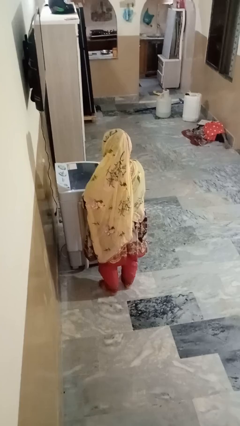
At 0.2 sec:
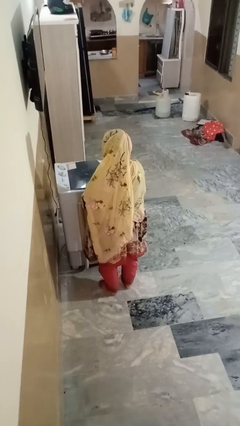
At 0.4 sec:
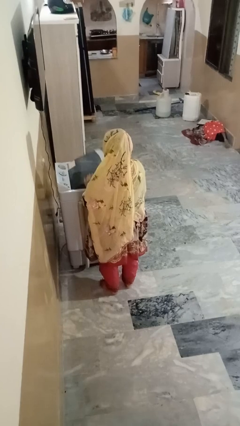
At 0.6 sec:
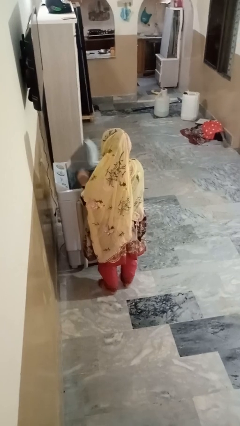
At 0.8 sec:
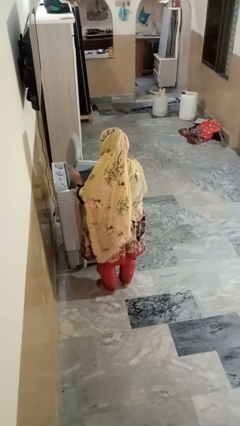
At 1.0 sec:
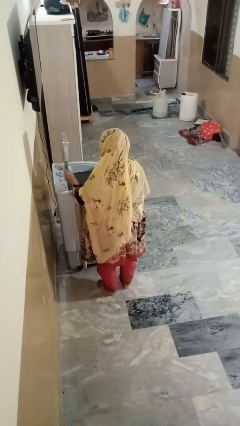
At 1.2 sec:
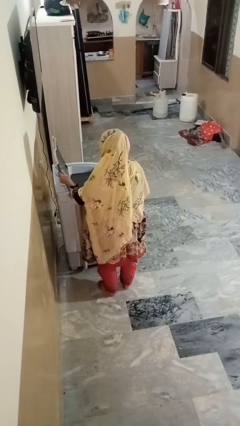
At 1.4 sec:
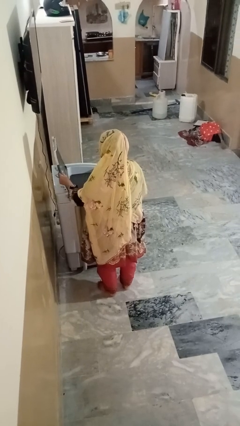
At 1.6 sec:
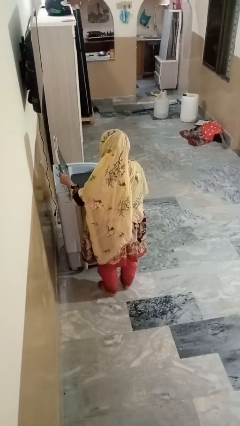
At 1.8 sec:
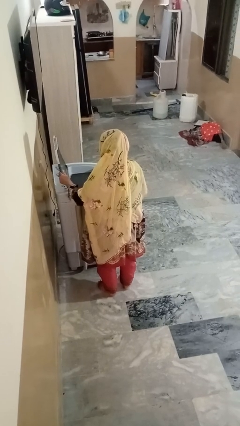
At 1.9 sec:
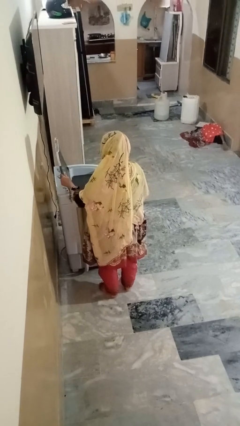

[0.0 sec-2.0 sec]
person opens clothes washer

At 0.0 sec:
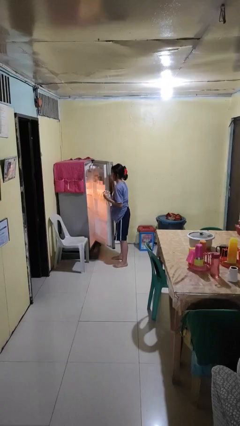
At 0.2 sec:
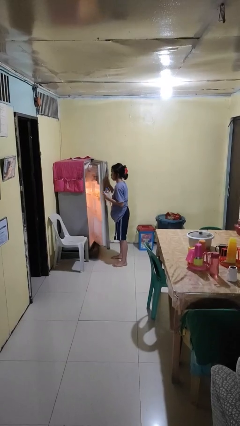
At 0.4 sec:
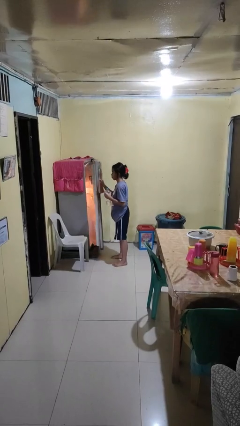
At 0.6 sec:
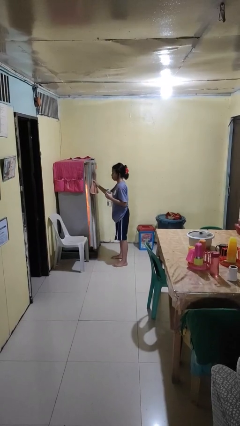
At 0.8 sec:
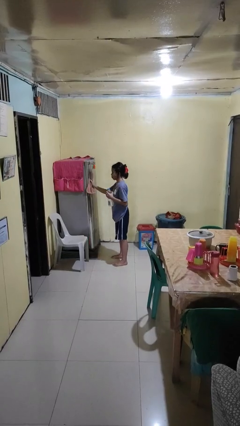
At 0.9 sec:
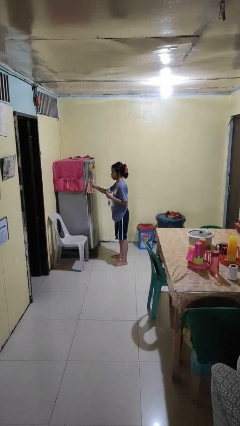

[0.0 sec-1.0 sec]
person closes refrigerator

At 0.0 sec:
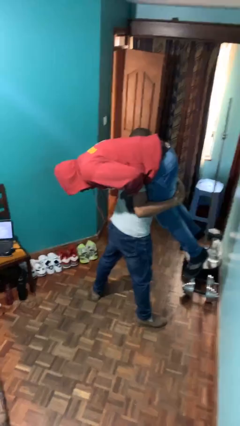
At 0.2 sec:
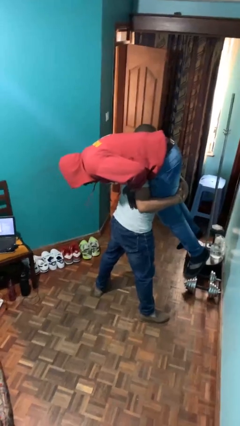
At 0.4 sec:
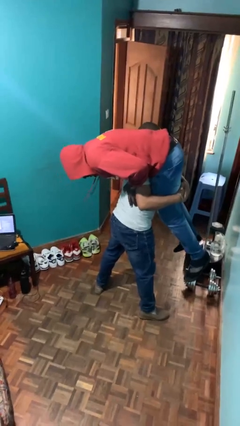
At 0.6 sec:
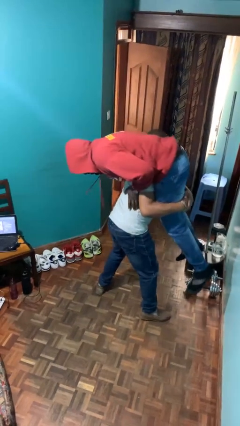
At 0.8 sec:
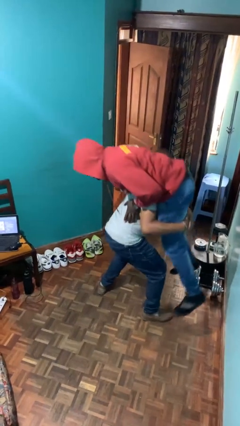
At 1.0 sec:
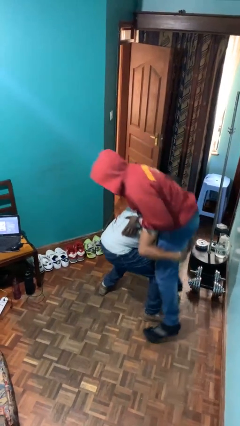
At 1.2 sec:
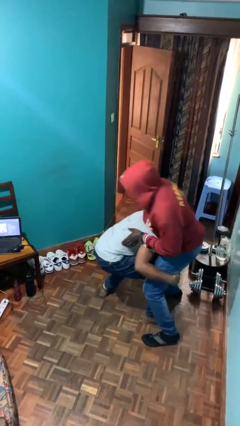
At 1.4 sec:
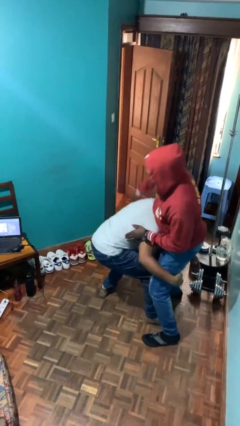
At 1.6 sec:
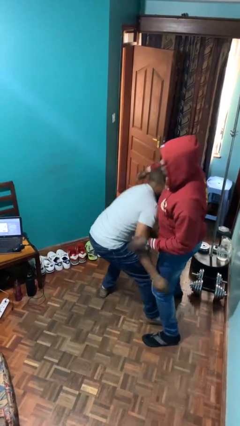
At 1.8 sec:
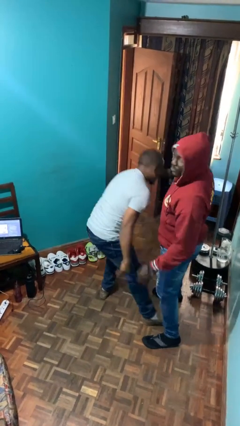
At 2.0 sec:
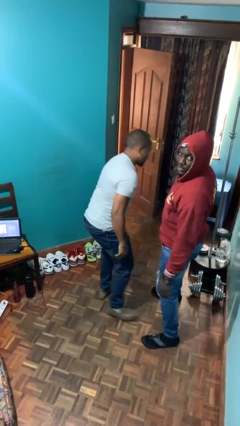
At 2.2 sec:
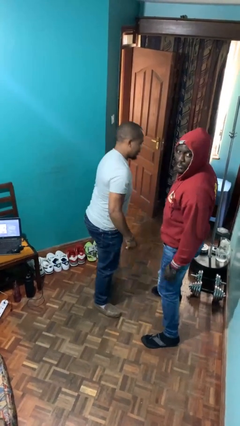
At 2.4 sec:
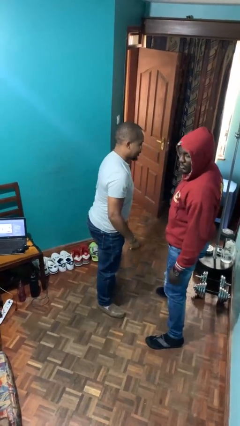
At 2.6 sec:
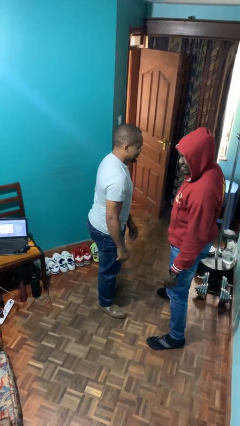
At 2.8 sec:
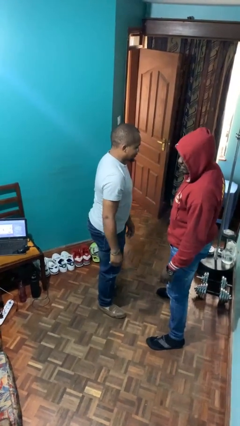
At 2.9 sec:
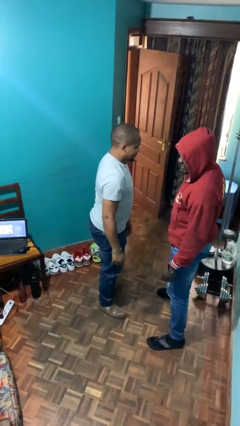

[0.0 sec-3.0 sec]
person puts down person

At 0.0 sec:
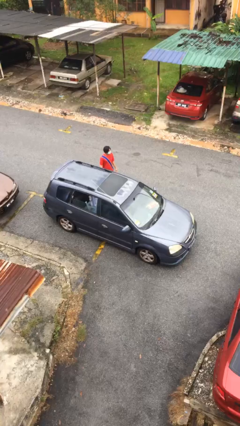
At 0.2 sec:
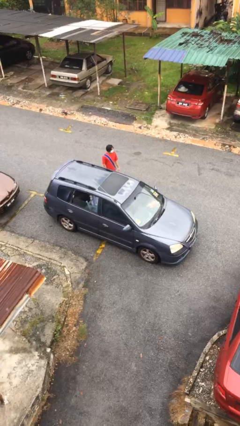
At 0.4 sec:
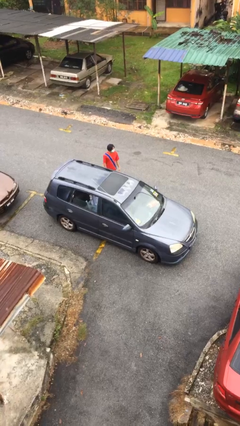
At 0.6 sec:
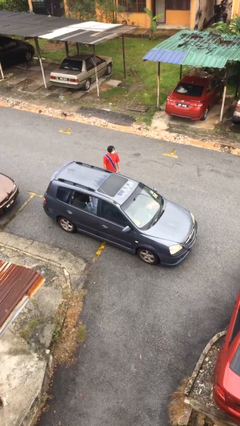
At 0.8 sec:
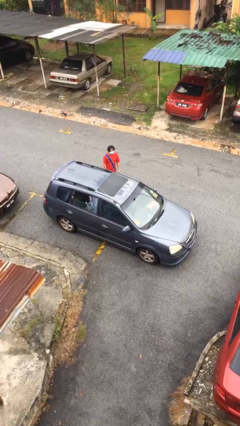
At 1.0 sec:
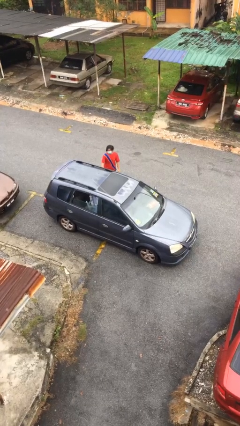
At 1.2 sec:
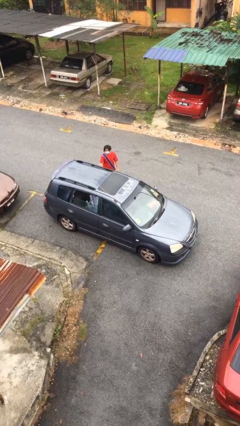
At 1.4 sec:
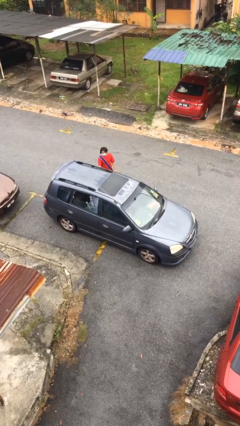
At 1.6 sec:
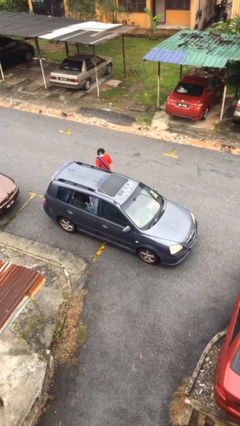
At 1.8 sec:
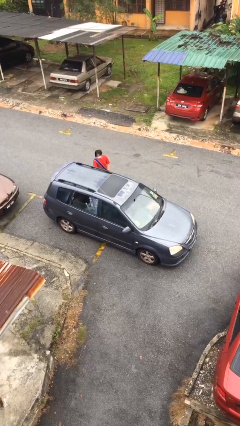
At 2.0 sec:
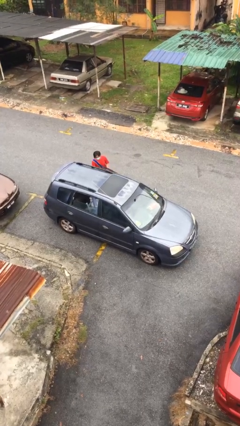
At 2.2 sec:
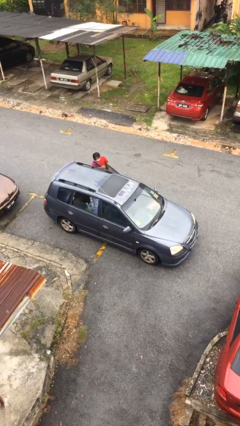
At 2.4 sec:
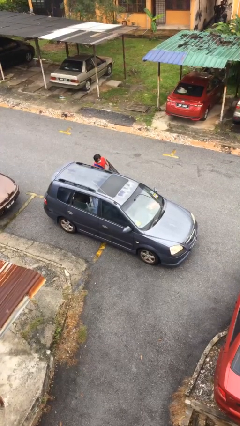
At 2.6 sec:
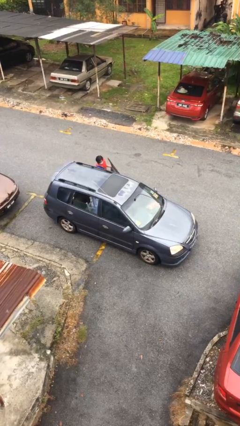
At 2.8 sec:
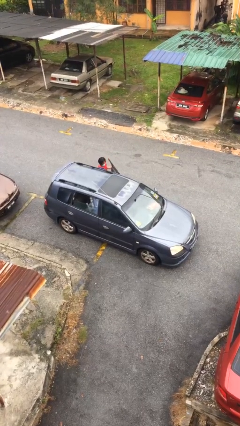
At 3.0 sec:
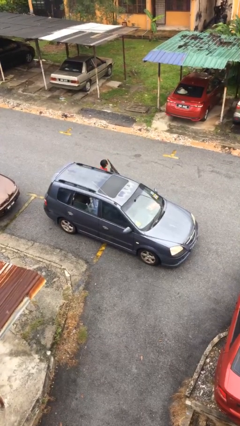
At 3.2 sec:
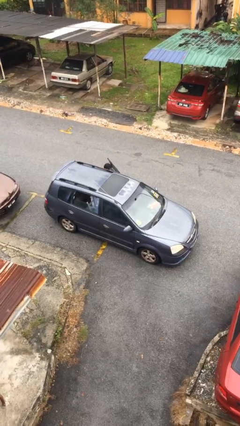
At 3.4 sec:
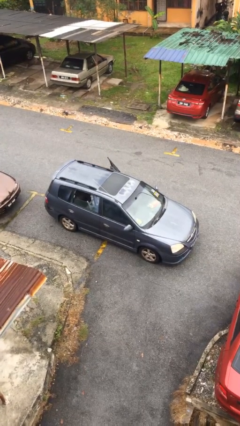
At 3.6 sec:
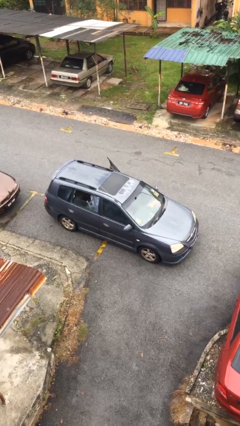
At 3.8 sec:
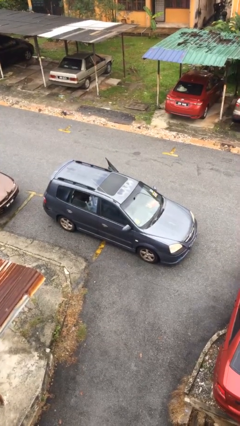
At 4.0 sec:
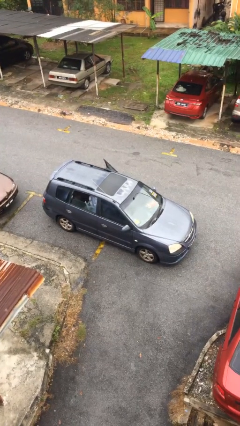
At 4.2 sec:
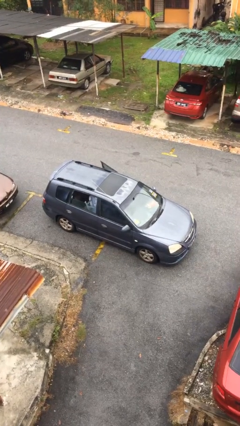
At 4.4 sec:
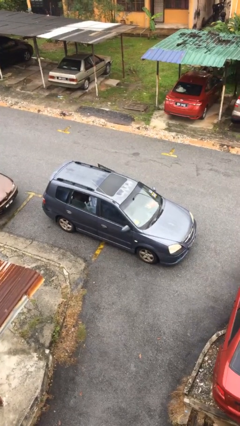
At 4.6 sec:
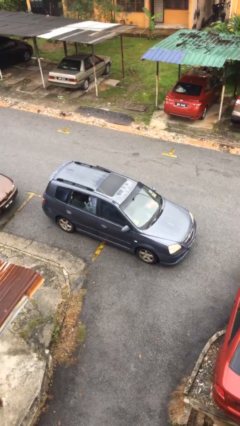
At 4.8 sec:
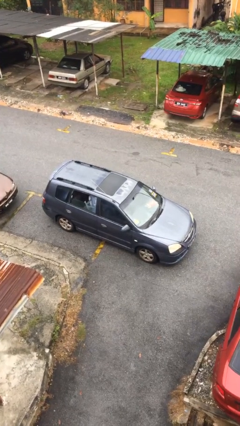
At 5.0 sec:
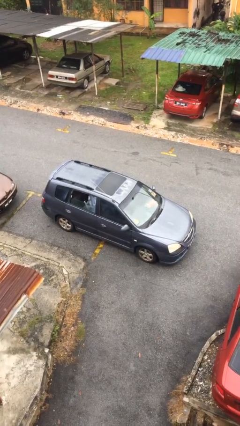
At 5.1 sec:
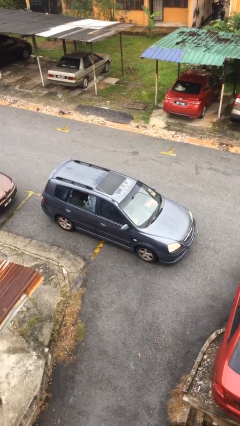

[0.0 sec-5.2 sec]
car picks up person

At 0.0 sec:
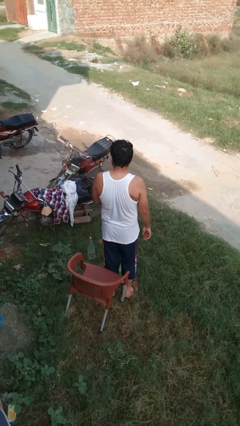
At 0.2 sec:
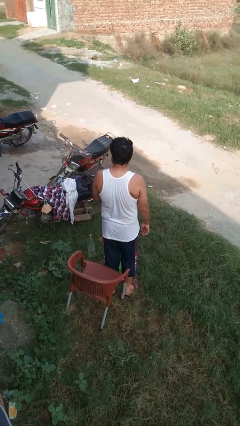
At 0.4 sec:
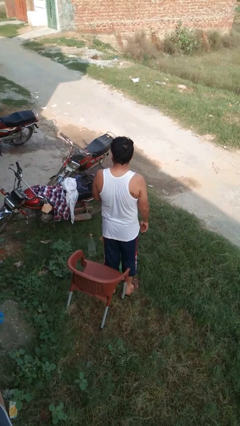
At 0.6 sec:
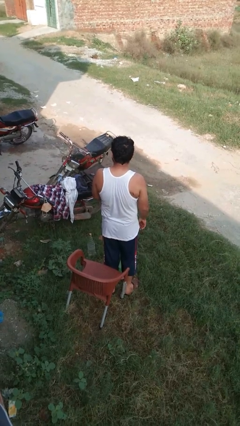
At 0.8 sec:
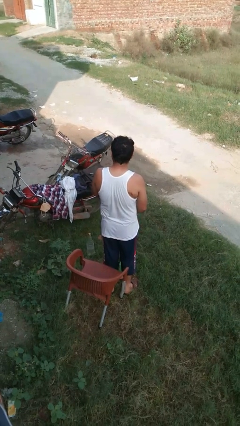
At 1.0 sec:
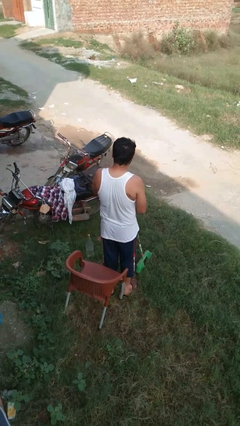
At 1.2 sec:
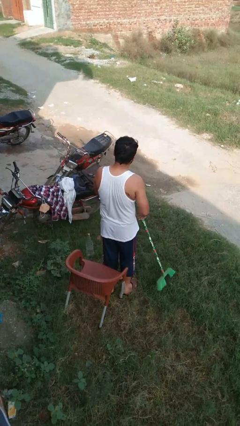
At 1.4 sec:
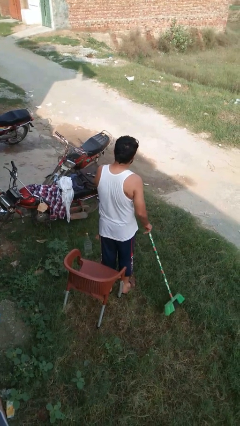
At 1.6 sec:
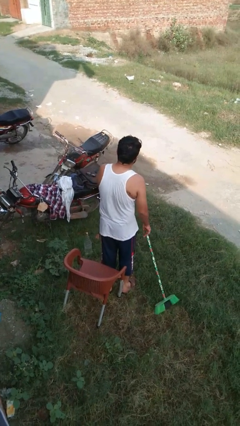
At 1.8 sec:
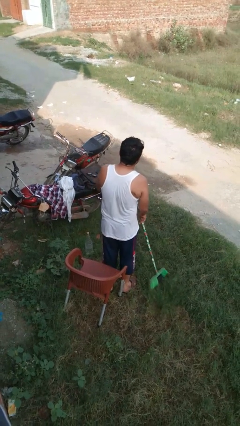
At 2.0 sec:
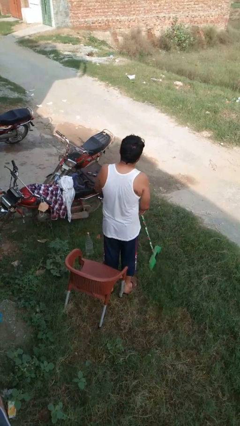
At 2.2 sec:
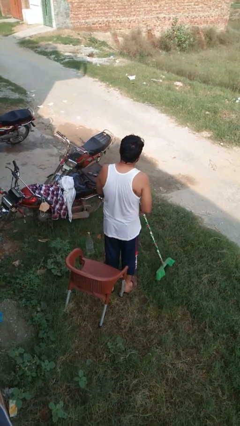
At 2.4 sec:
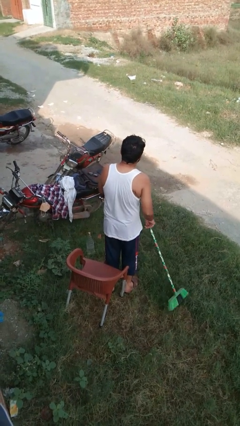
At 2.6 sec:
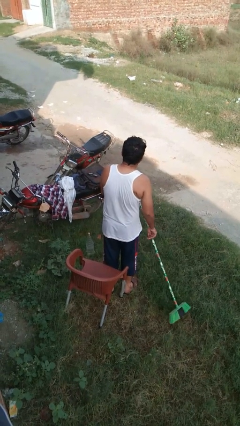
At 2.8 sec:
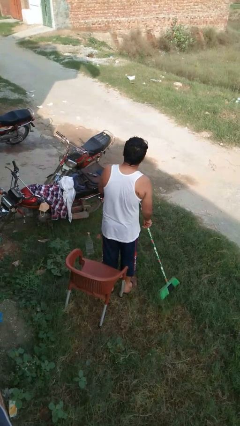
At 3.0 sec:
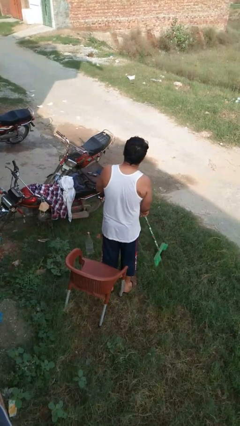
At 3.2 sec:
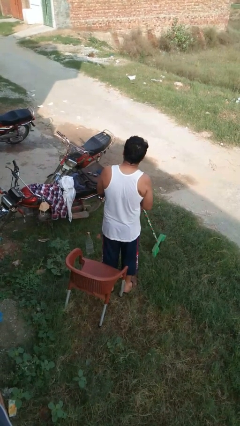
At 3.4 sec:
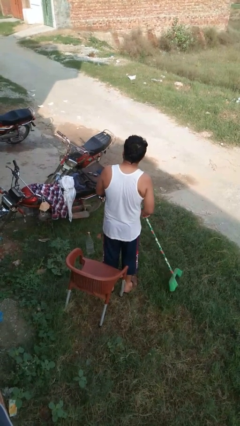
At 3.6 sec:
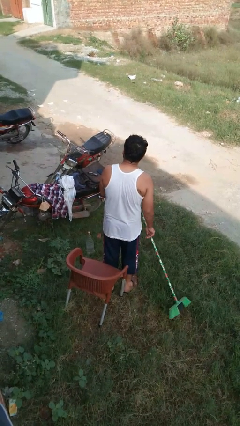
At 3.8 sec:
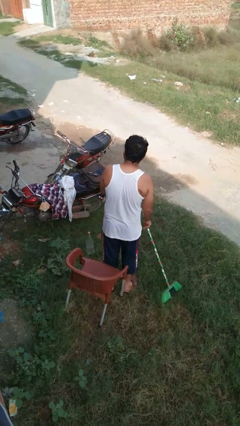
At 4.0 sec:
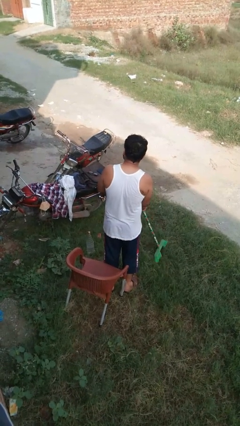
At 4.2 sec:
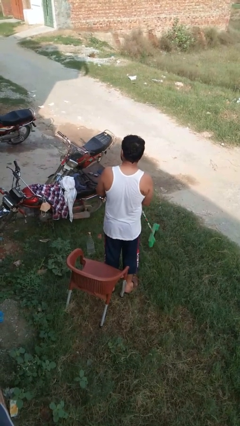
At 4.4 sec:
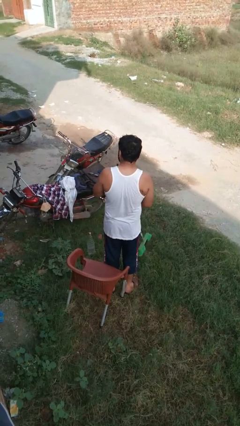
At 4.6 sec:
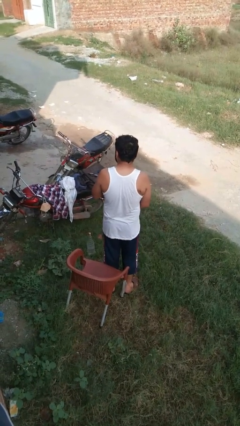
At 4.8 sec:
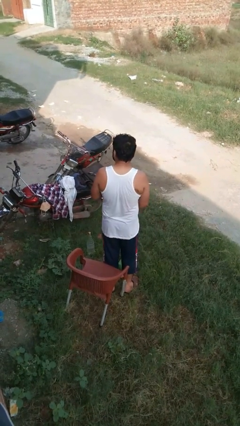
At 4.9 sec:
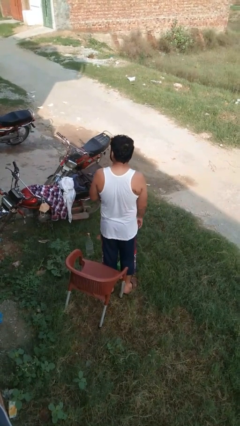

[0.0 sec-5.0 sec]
person sweeps floor

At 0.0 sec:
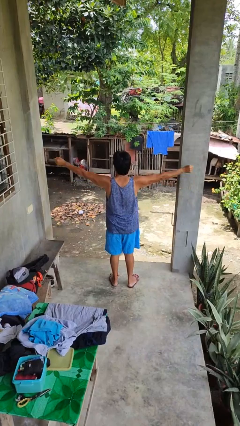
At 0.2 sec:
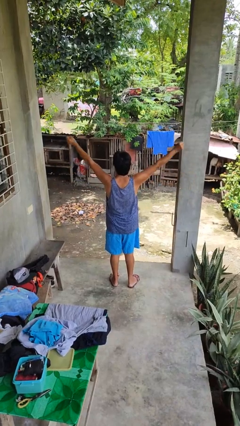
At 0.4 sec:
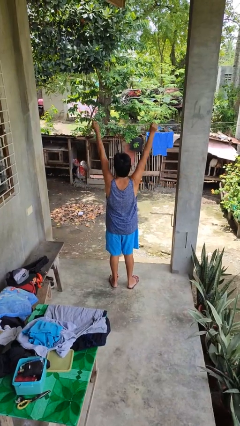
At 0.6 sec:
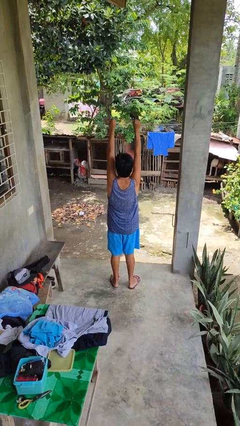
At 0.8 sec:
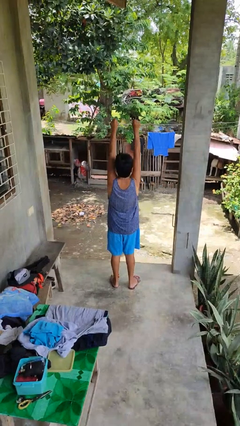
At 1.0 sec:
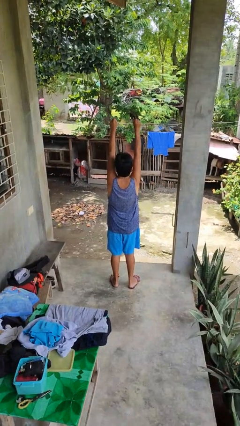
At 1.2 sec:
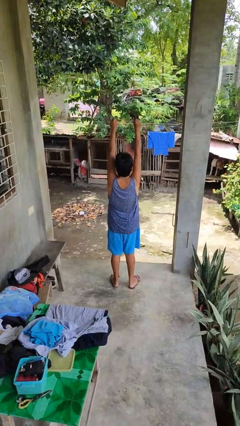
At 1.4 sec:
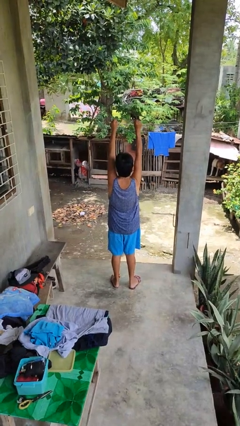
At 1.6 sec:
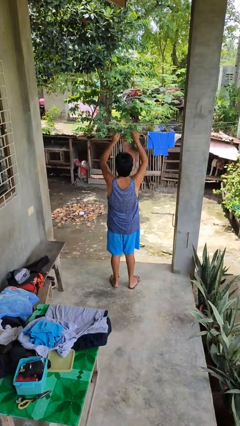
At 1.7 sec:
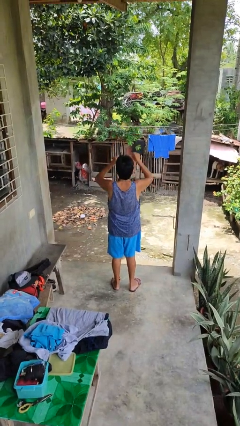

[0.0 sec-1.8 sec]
person stretches arms over head
